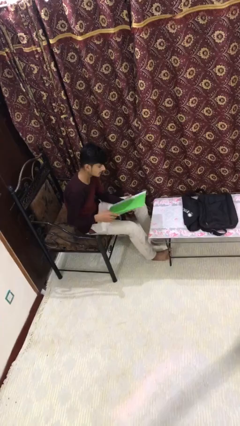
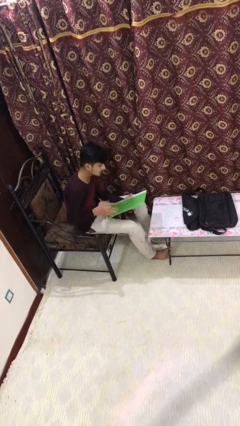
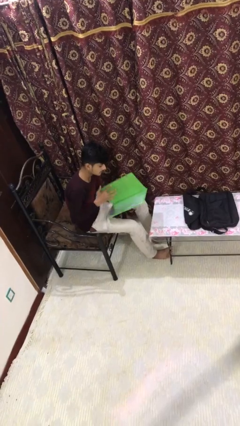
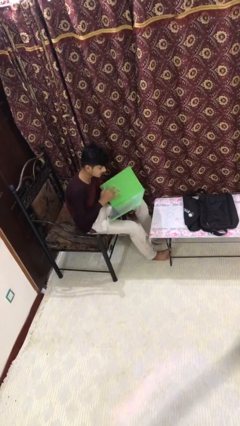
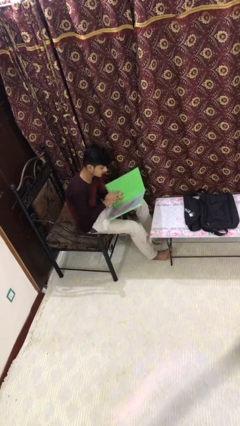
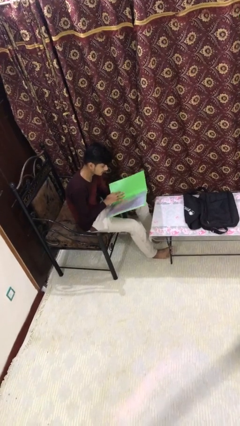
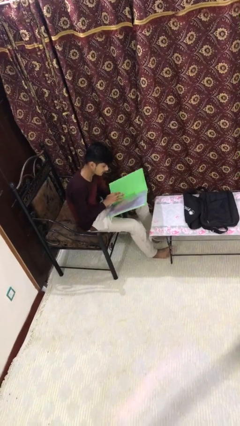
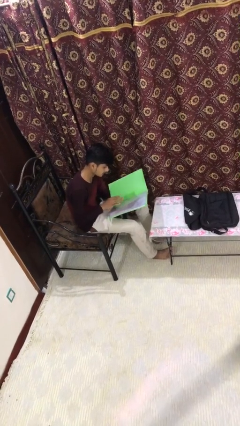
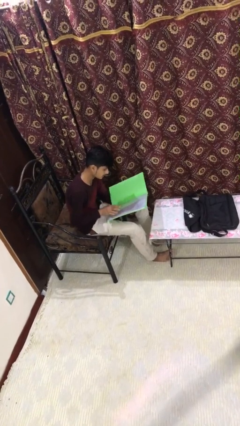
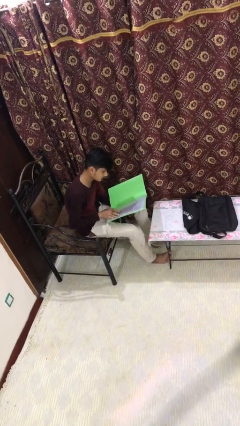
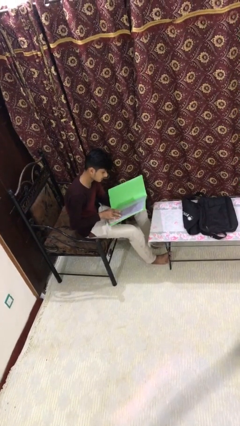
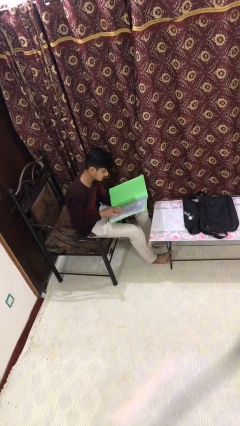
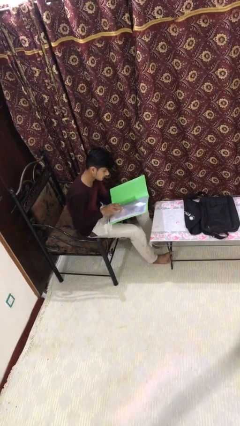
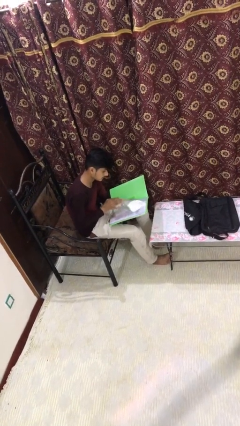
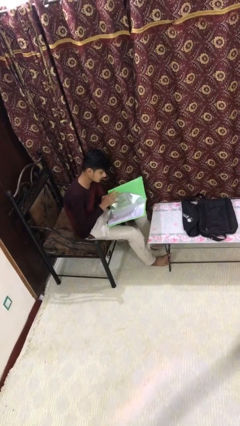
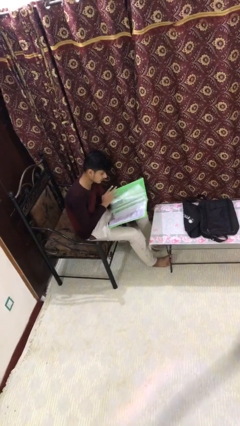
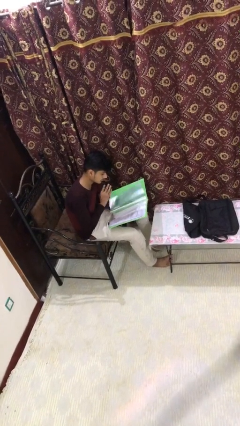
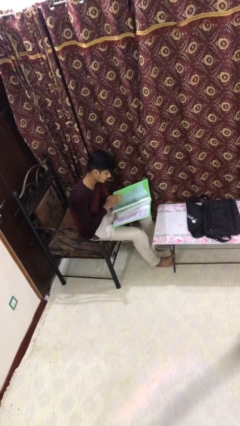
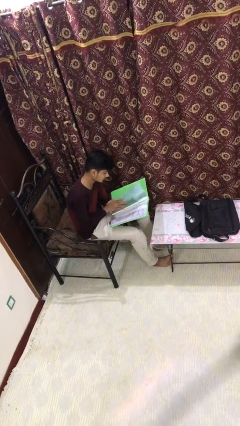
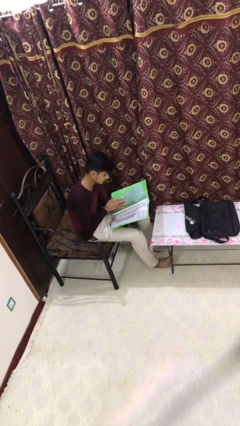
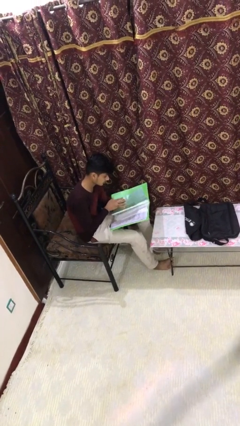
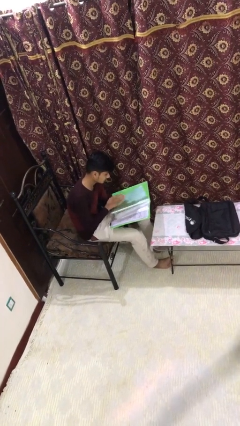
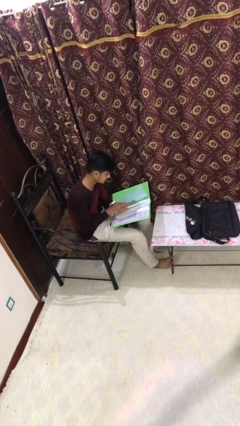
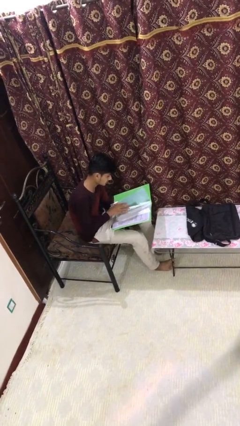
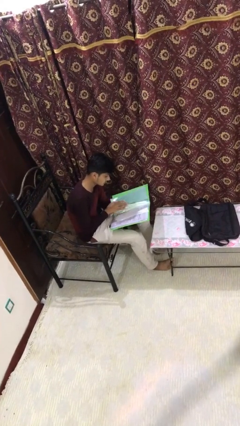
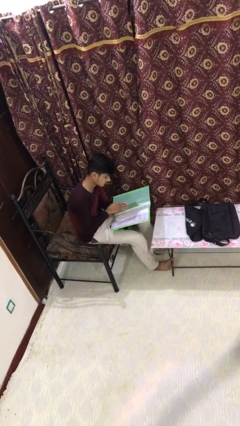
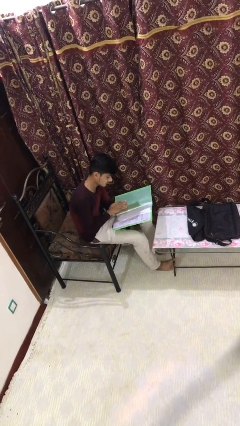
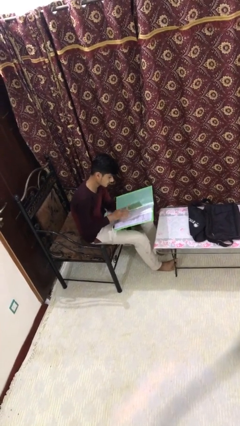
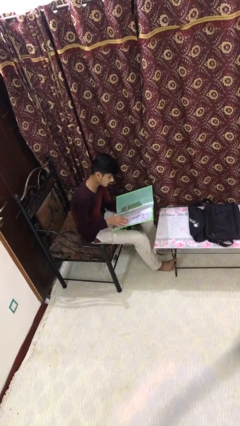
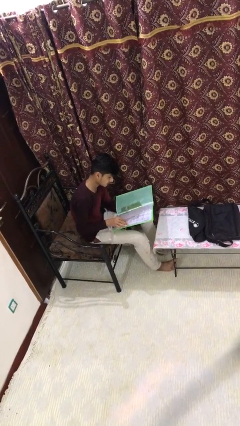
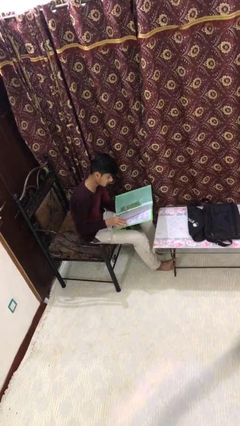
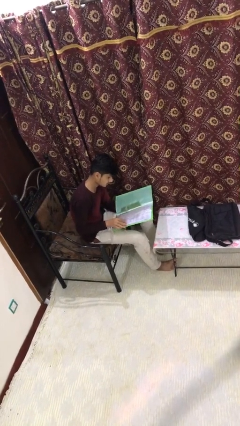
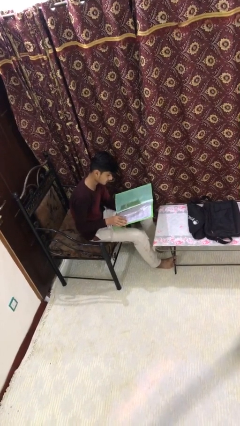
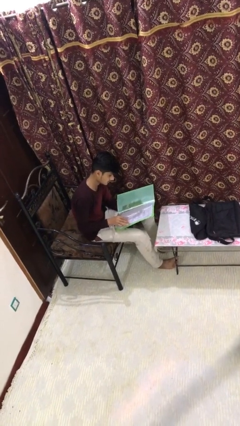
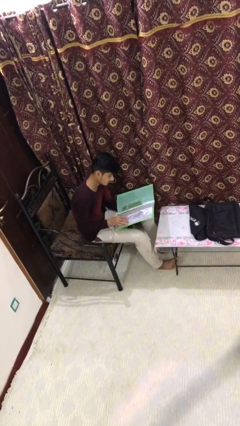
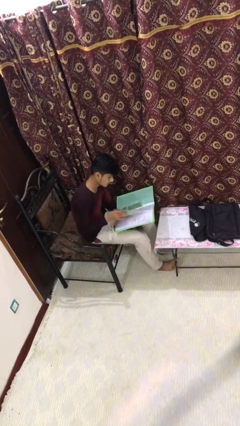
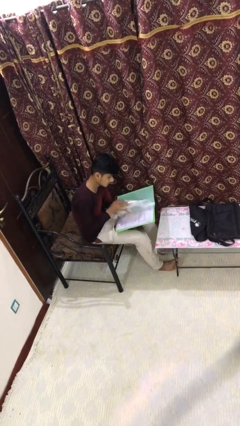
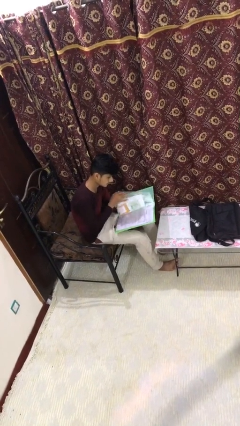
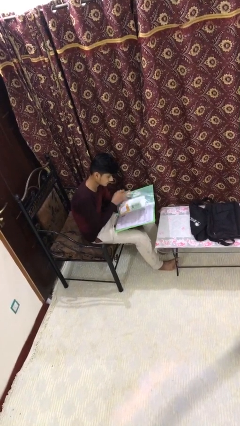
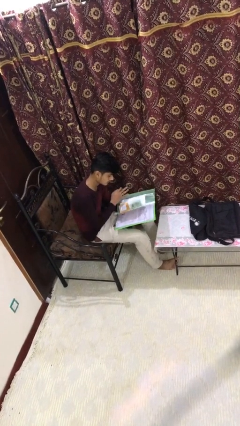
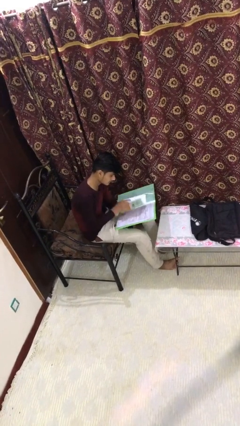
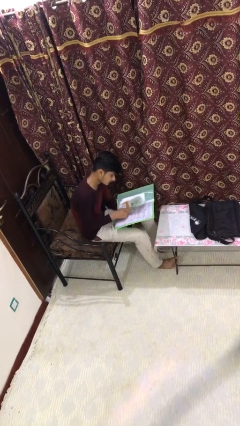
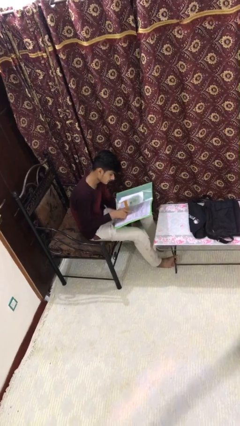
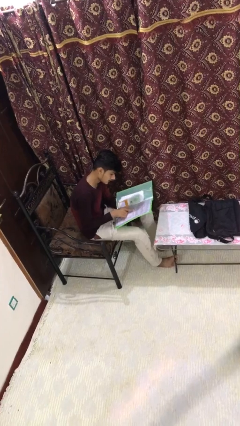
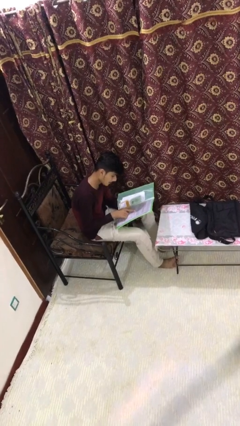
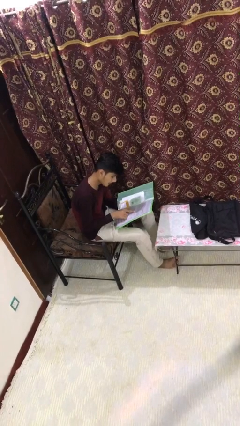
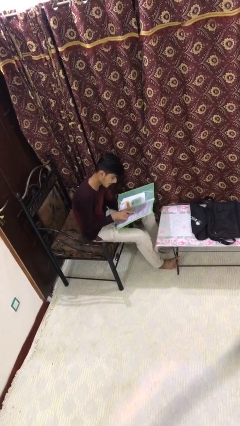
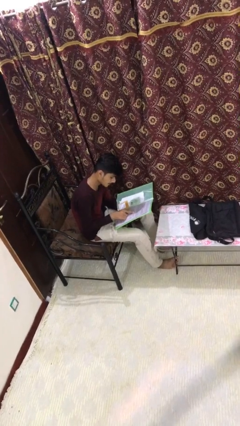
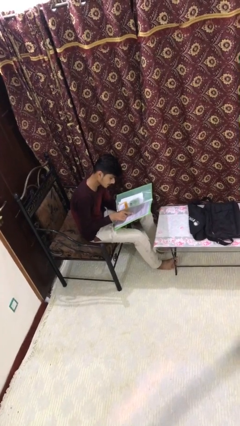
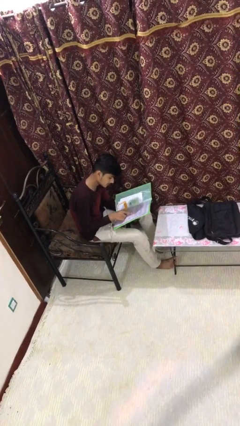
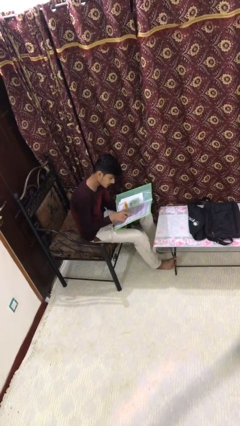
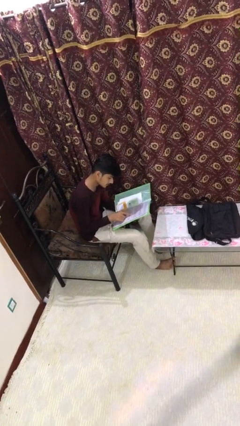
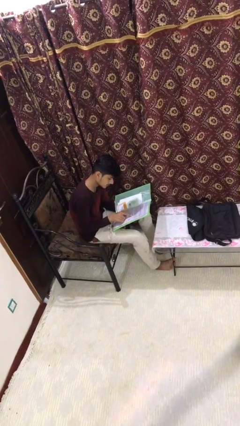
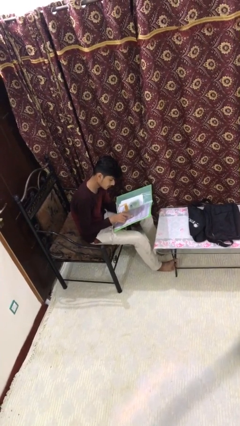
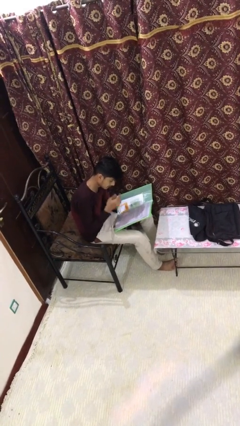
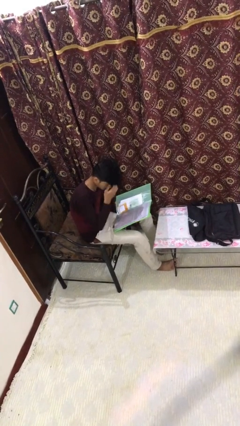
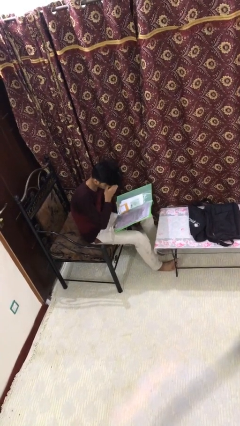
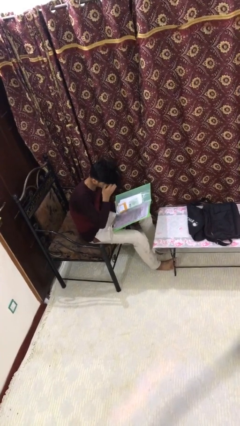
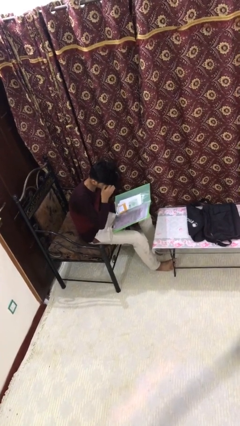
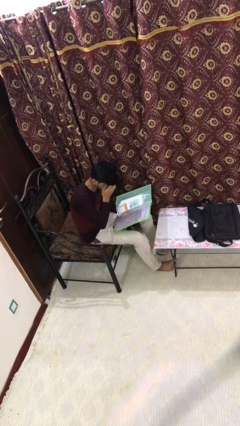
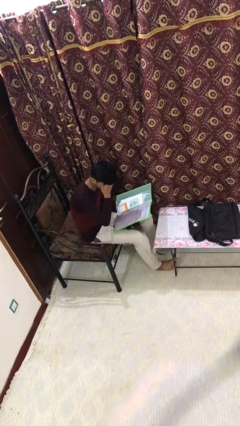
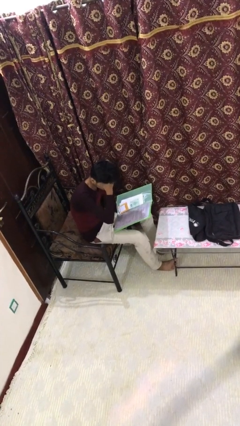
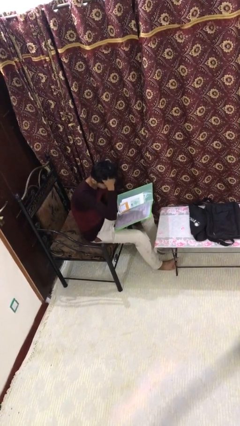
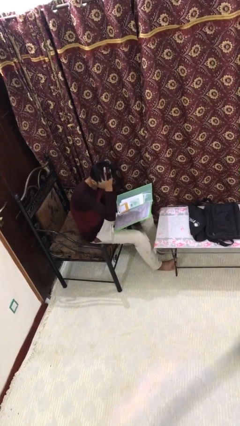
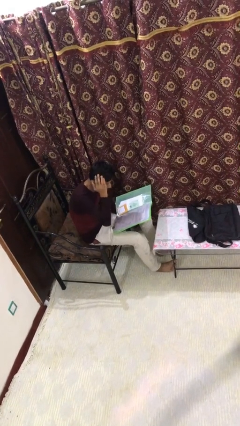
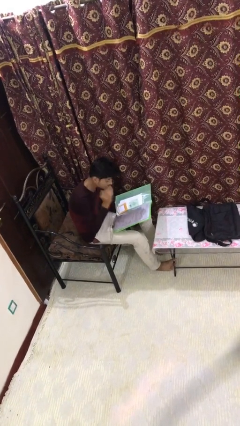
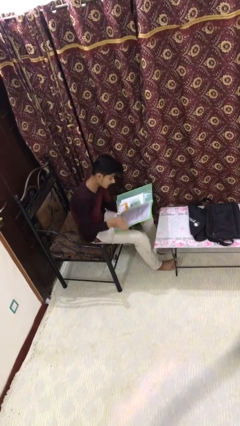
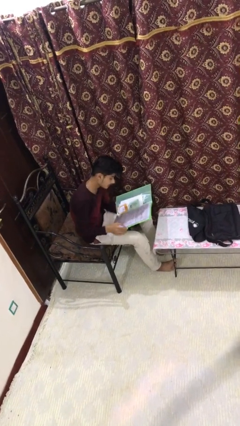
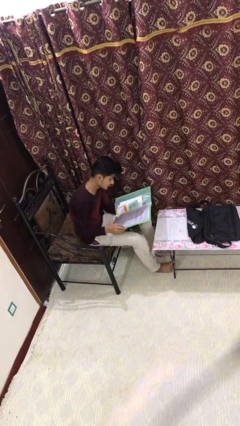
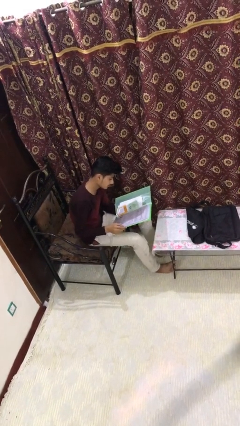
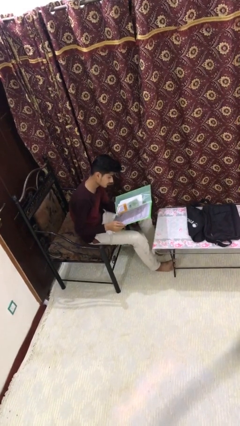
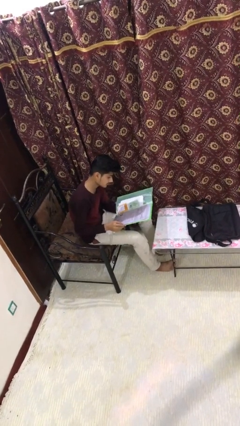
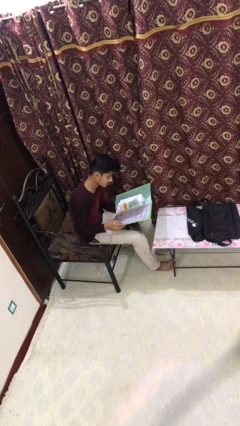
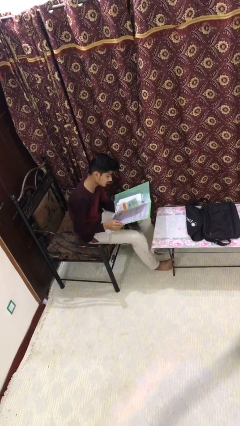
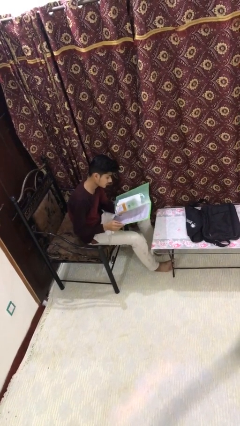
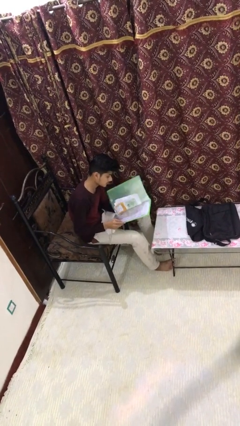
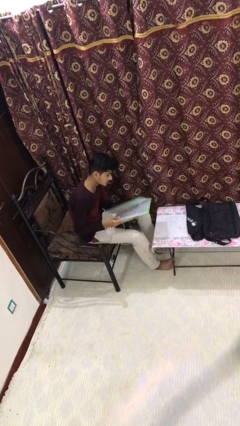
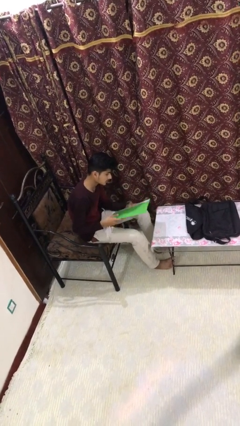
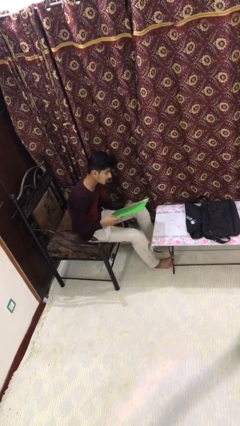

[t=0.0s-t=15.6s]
person reads document

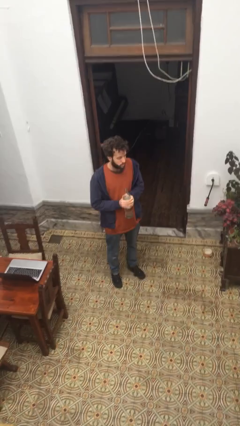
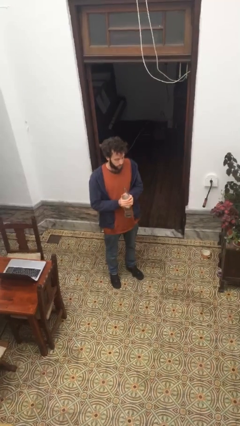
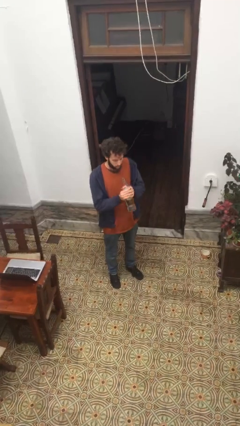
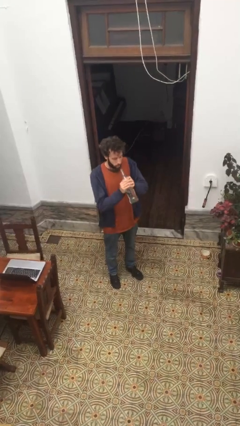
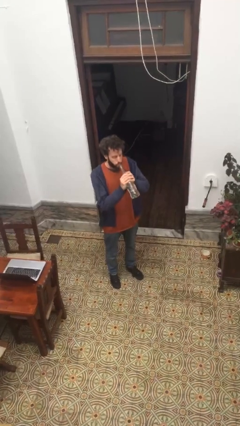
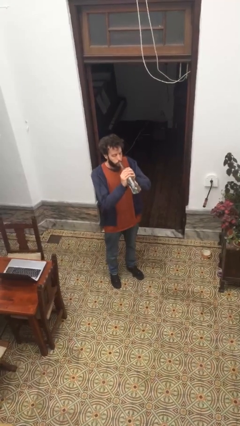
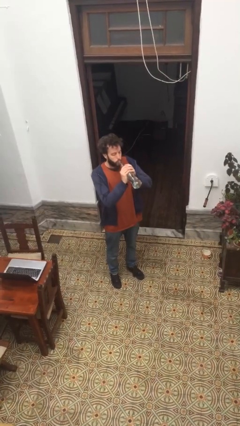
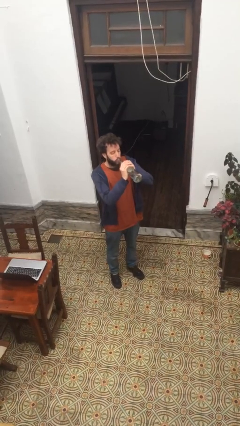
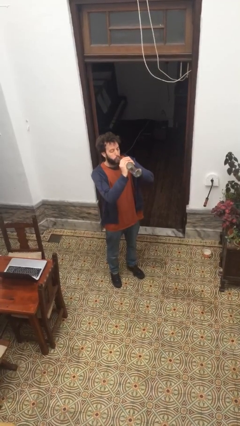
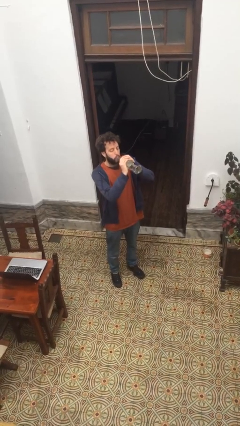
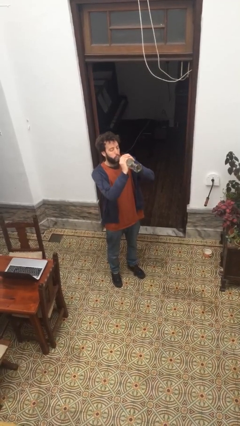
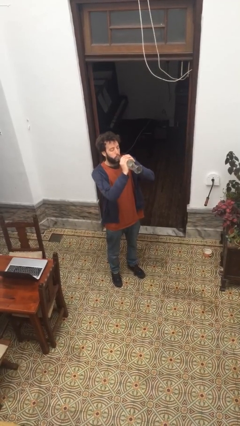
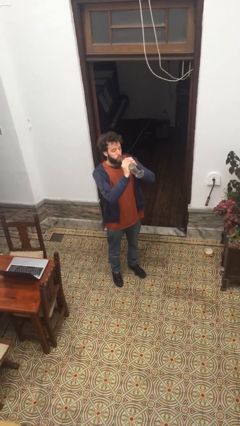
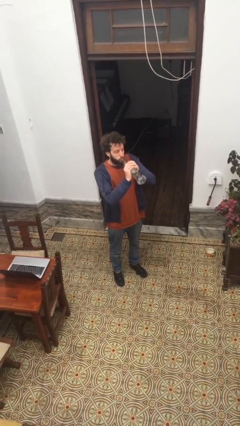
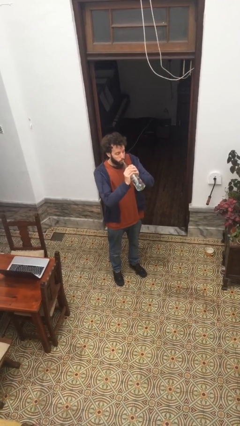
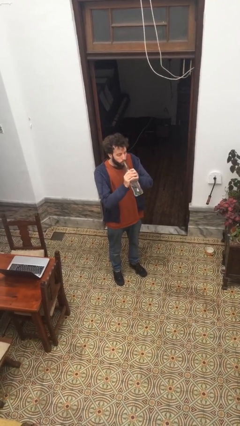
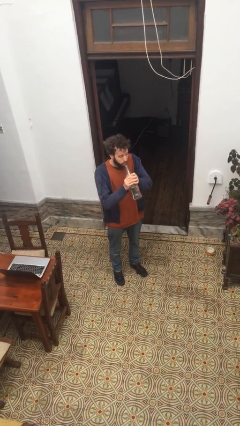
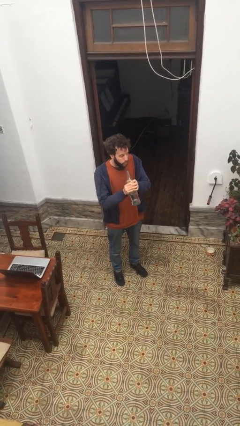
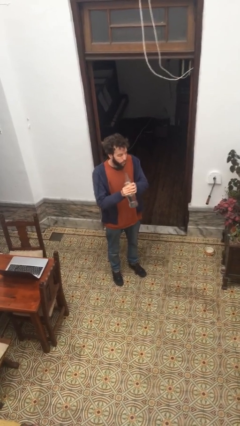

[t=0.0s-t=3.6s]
person drinks from bottle
